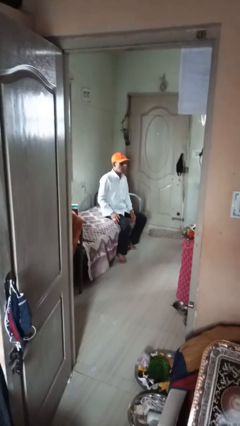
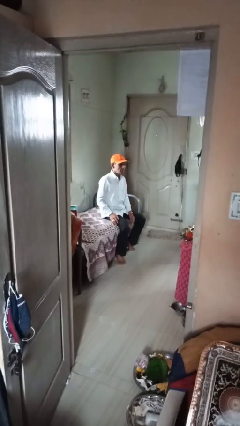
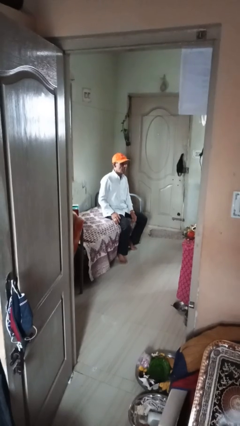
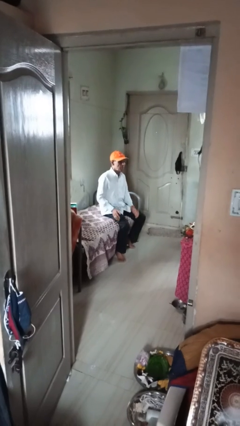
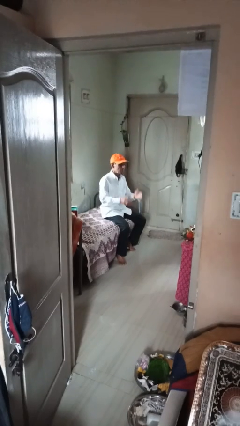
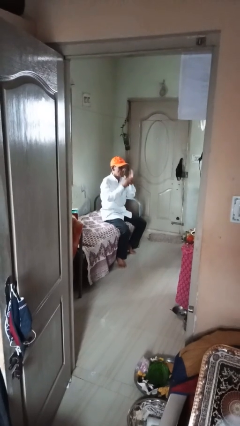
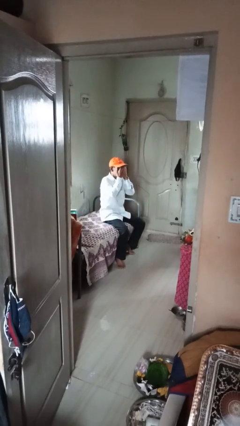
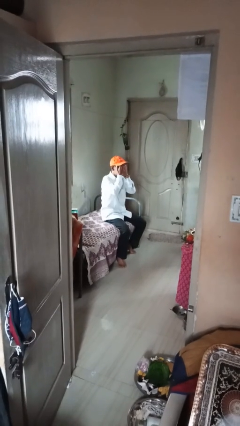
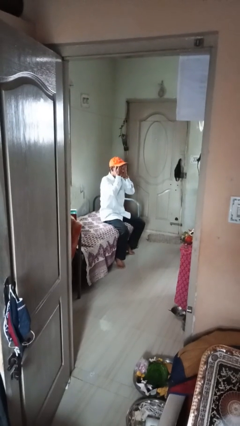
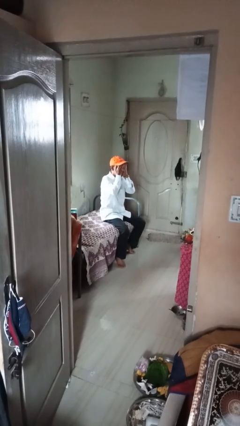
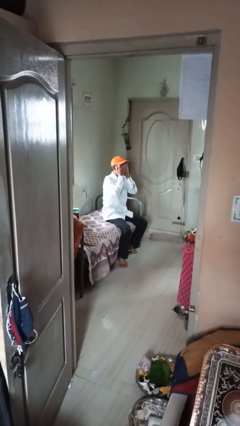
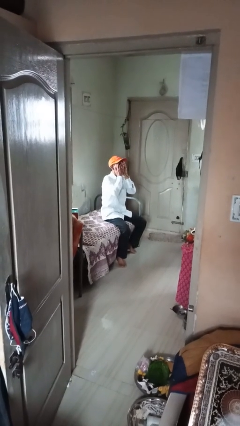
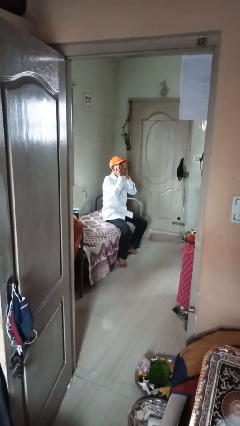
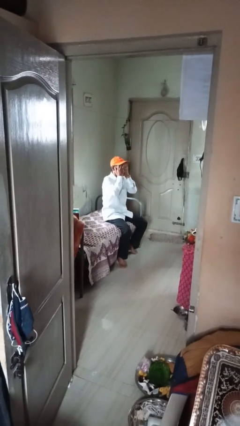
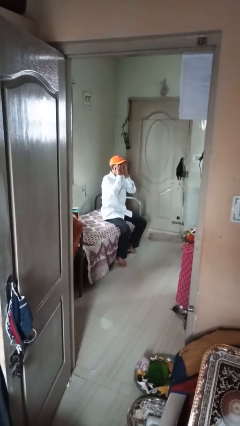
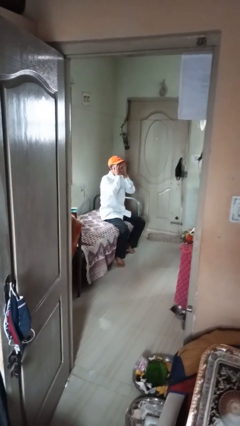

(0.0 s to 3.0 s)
person covers face with hands

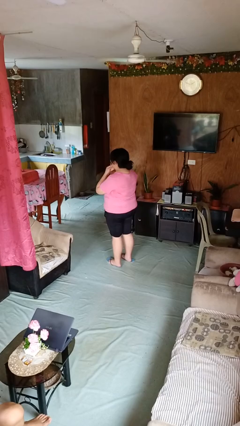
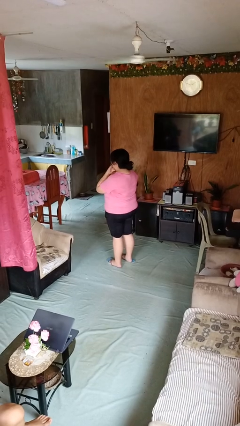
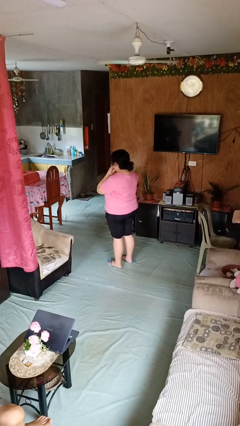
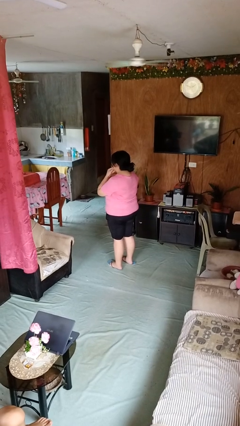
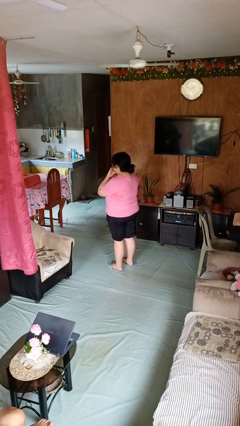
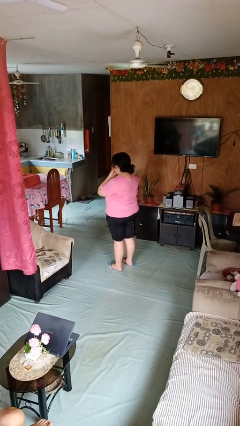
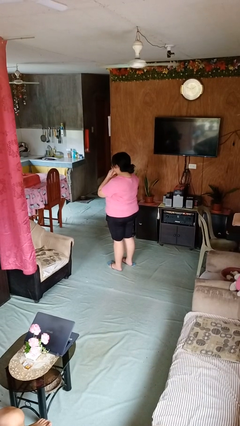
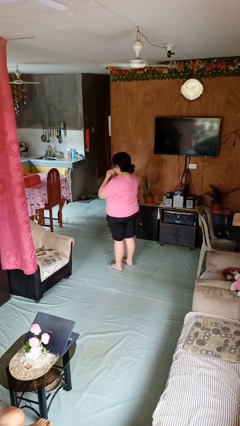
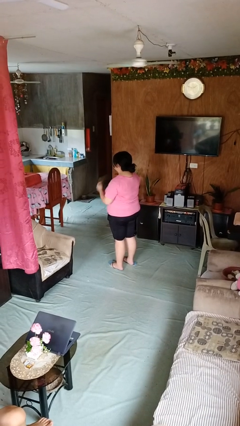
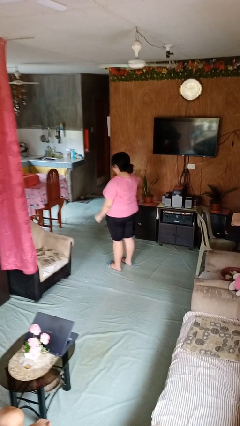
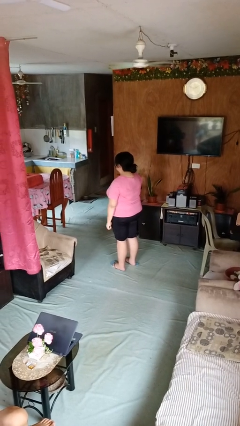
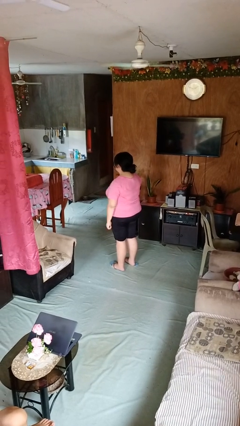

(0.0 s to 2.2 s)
person strokes chin

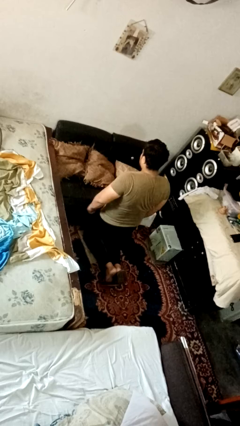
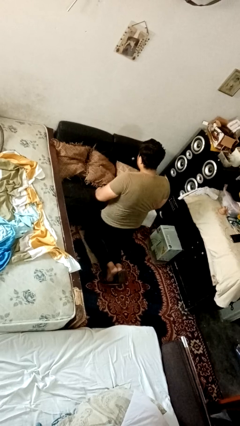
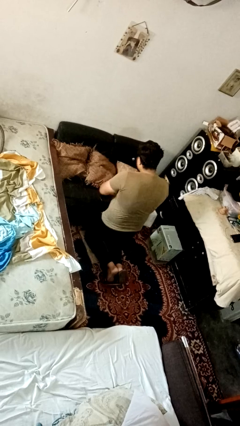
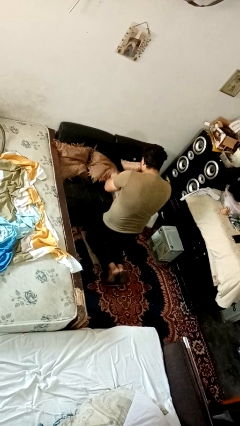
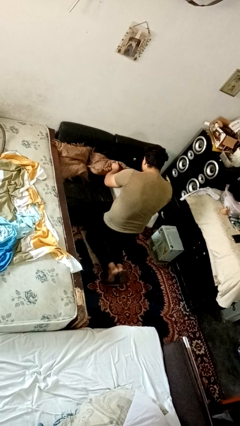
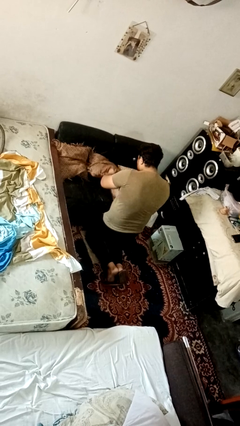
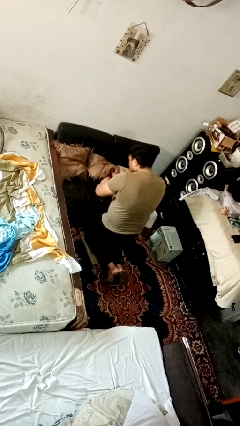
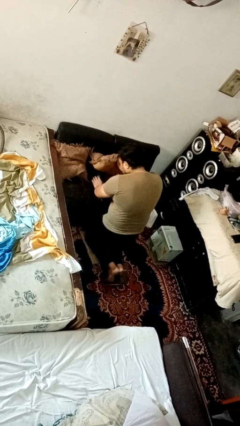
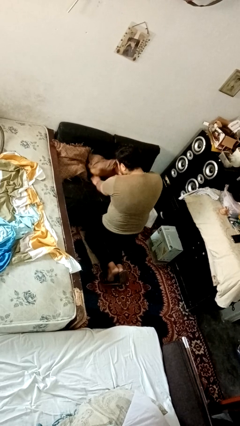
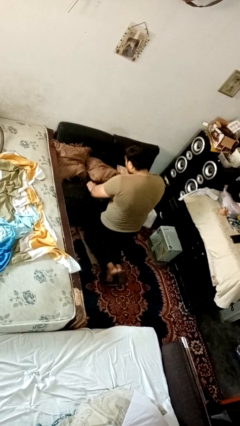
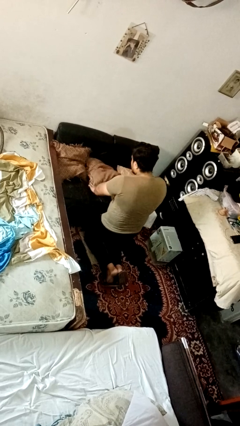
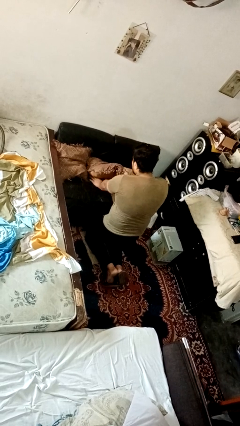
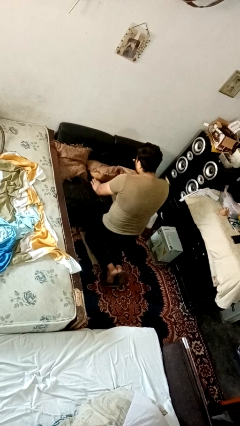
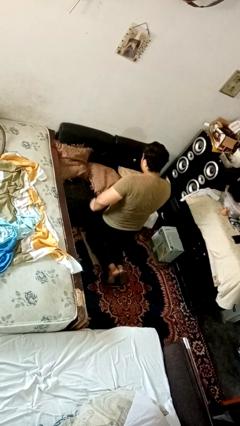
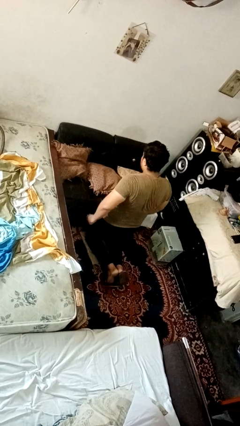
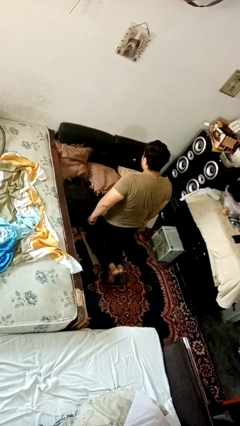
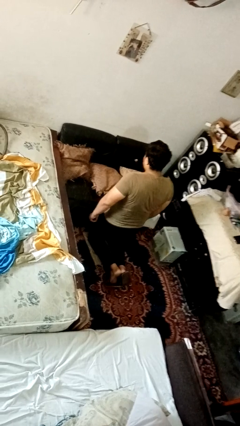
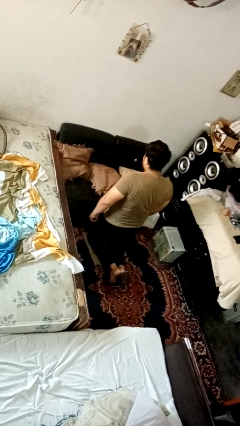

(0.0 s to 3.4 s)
person searches in couch

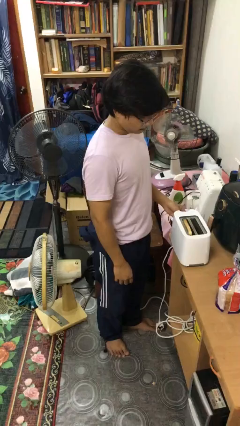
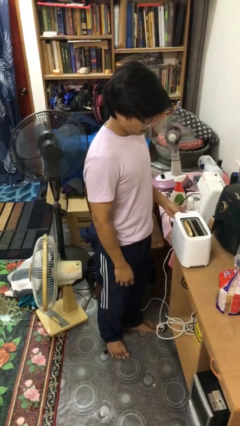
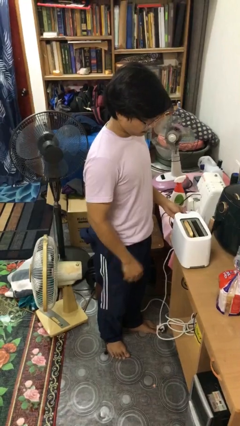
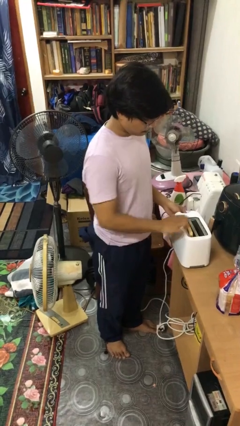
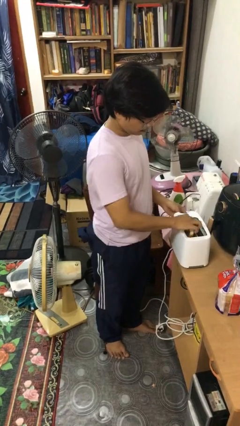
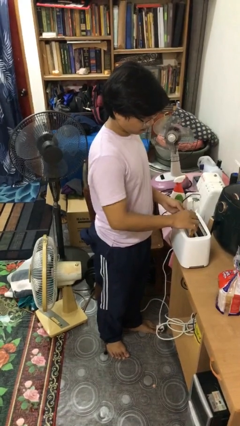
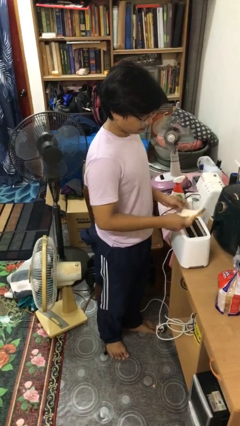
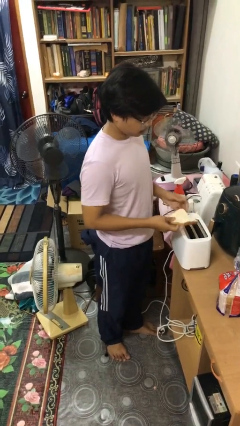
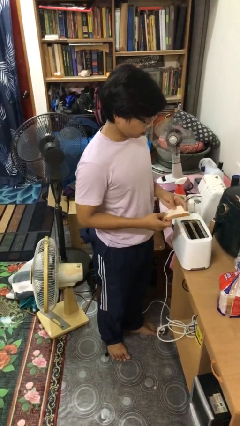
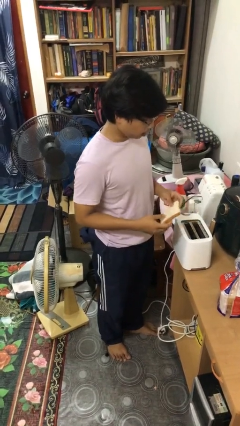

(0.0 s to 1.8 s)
person takes object from toaster

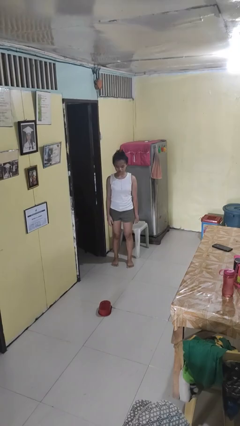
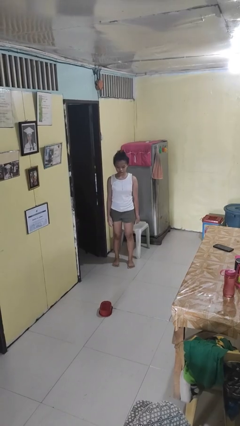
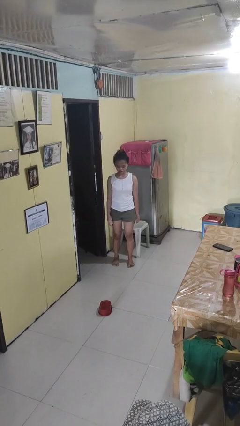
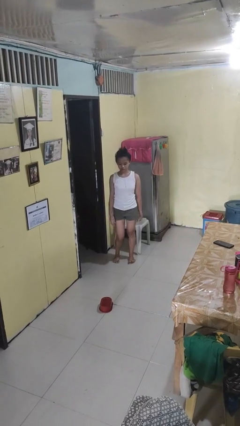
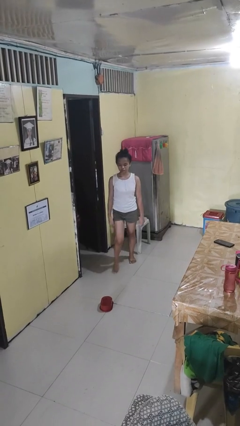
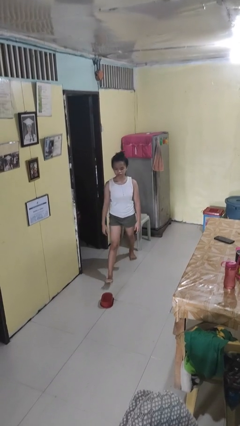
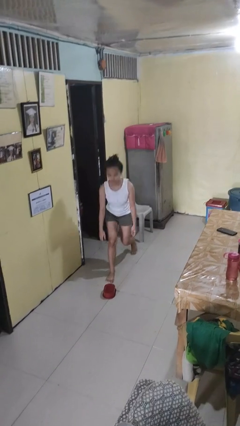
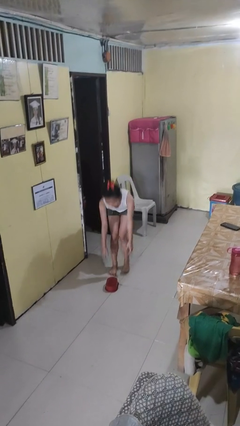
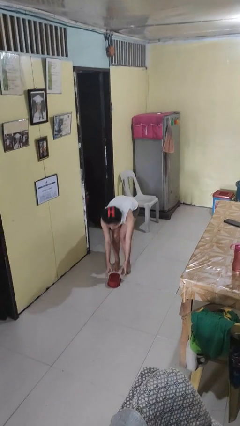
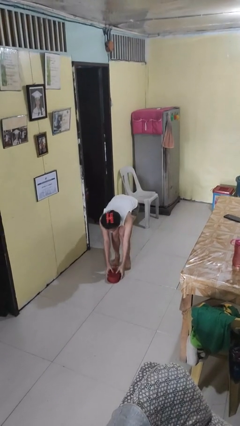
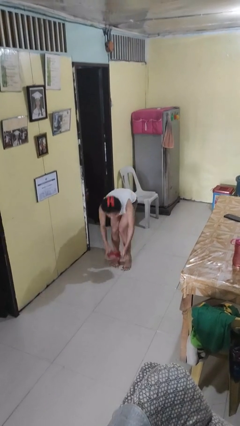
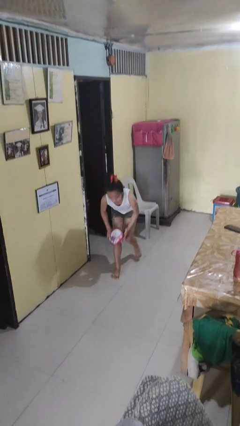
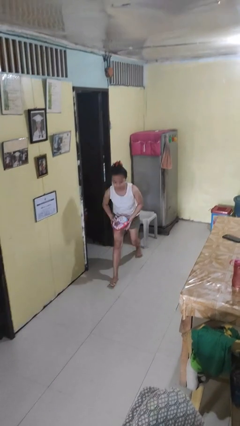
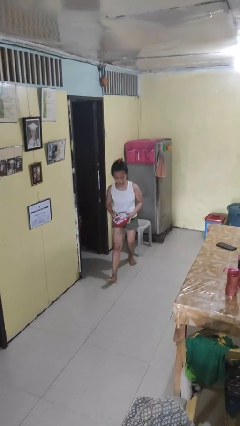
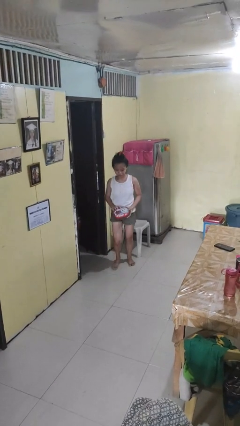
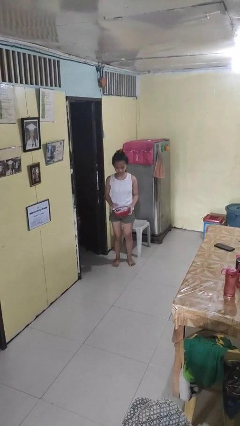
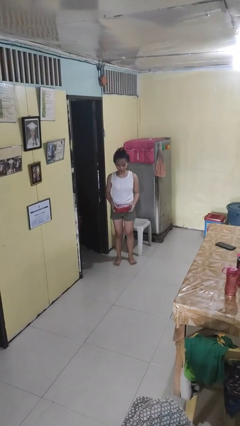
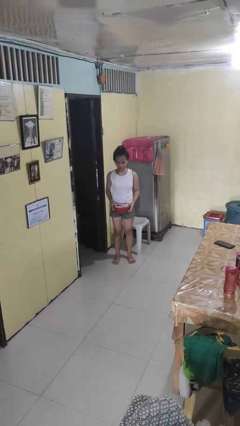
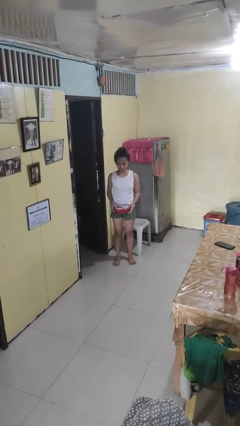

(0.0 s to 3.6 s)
person picks up object from floor

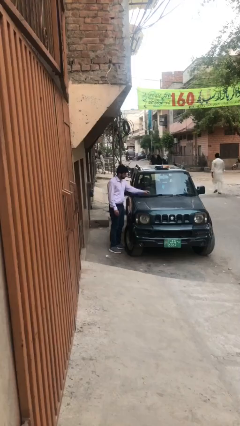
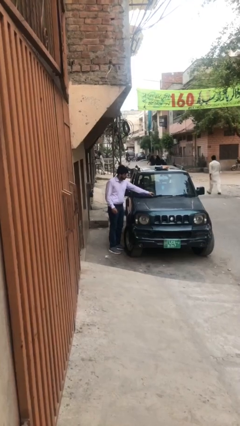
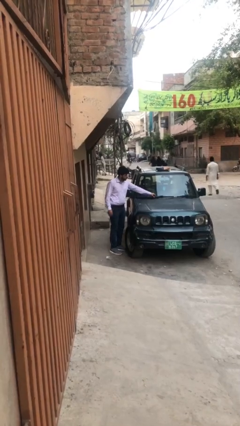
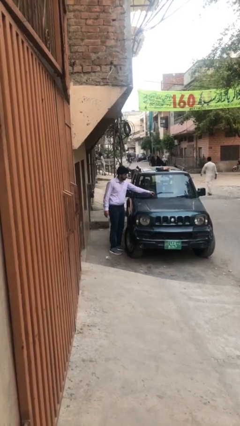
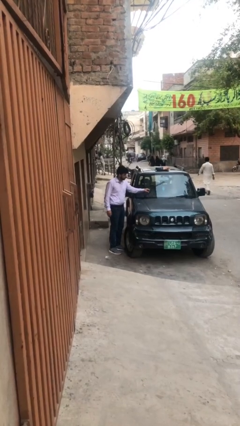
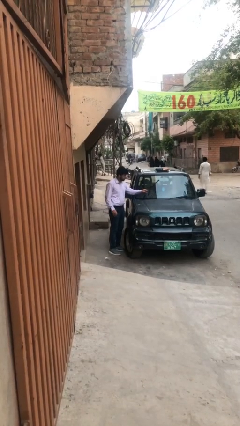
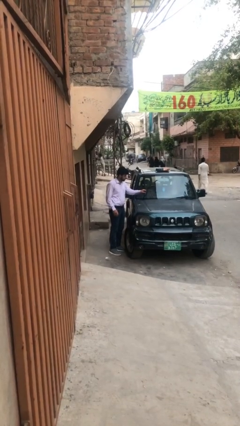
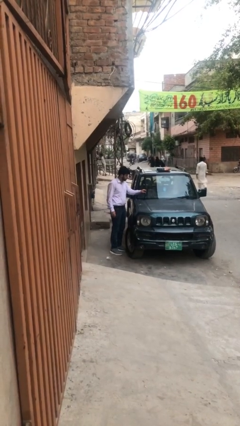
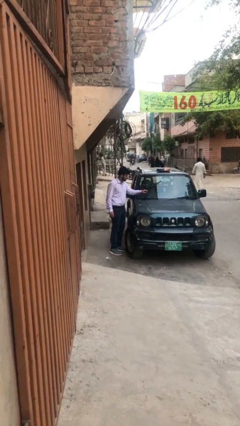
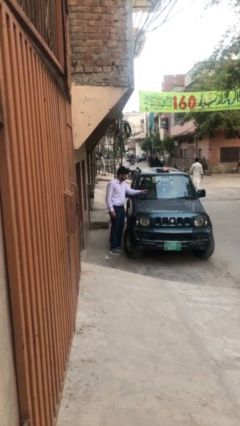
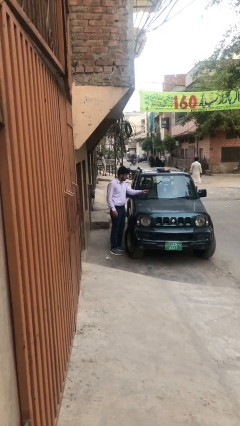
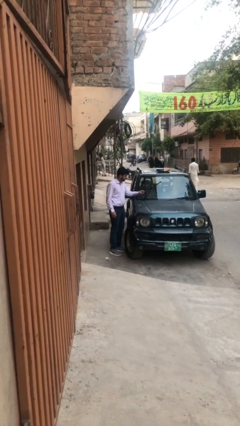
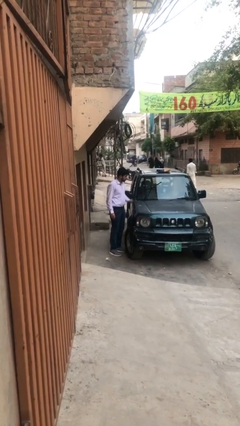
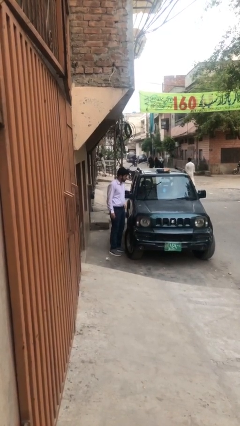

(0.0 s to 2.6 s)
person flips up car wipers

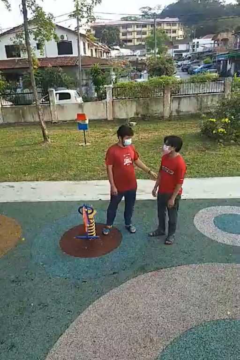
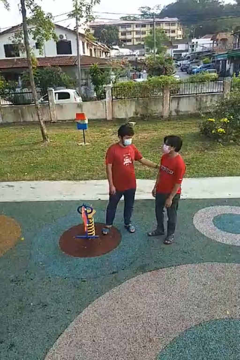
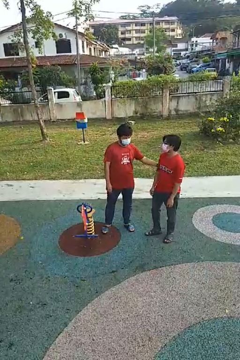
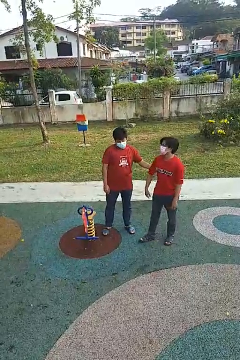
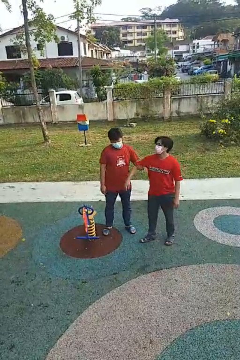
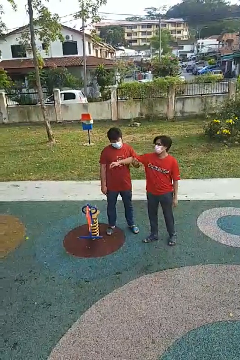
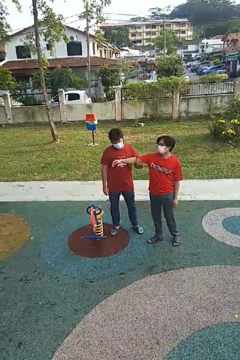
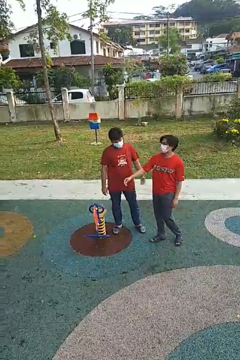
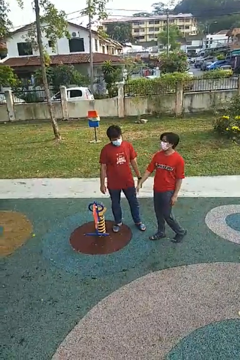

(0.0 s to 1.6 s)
person grabs person by bicep
